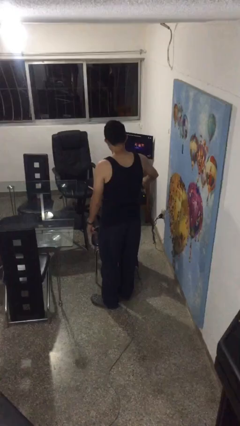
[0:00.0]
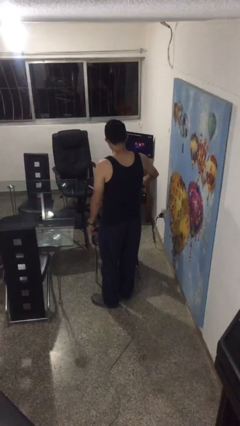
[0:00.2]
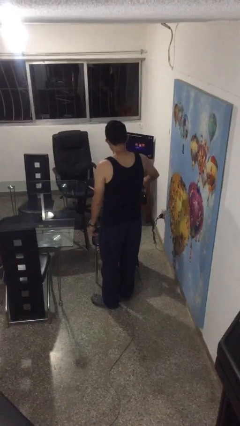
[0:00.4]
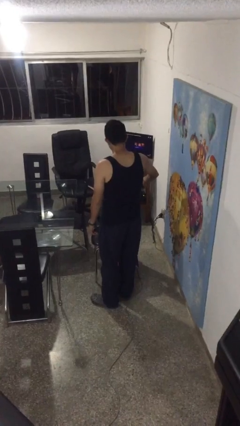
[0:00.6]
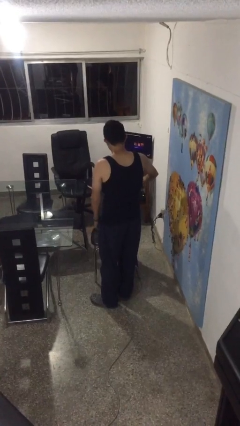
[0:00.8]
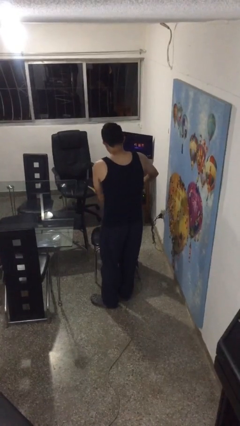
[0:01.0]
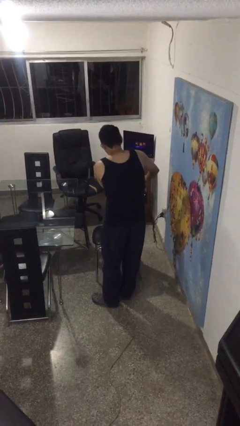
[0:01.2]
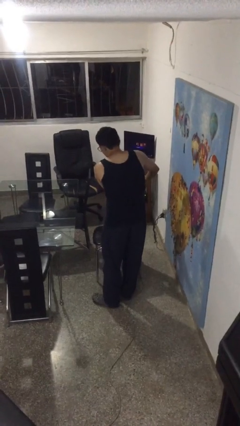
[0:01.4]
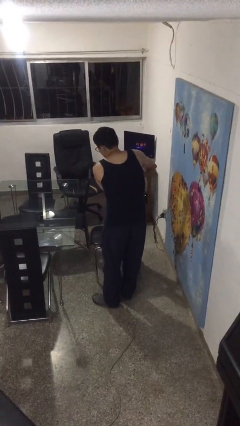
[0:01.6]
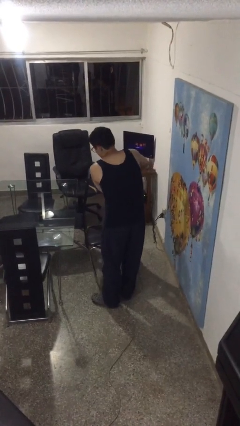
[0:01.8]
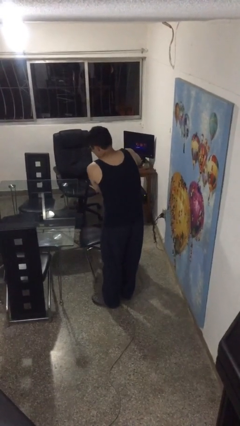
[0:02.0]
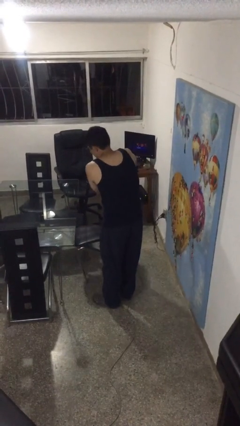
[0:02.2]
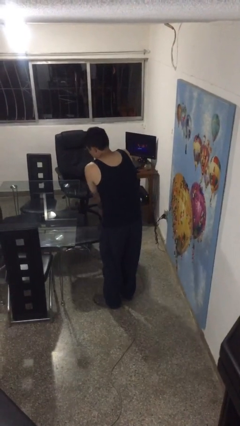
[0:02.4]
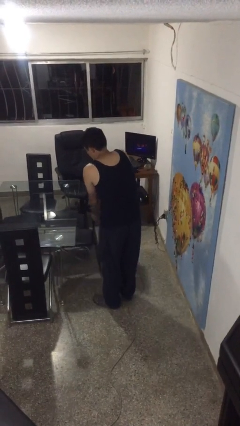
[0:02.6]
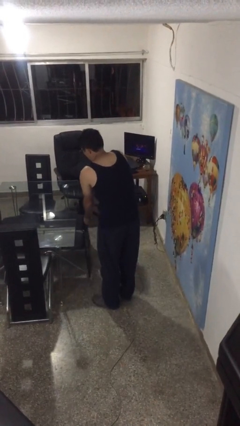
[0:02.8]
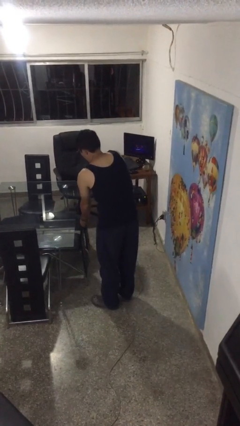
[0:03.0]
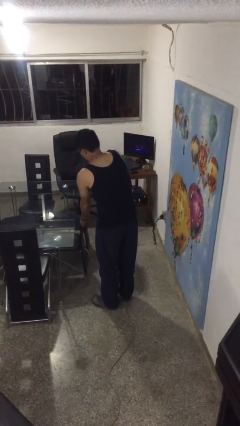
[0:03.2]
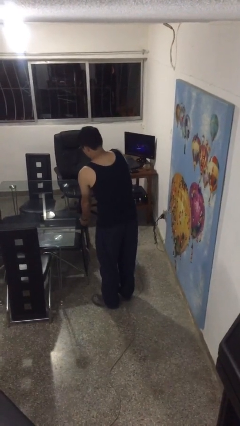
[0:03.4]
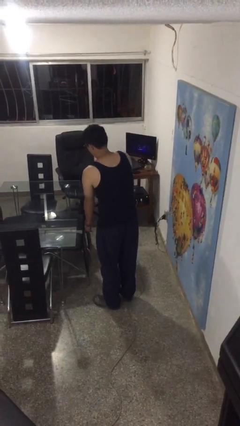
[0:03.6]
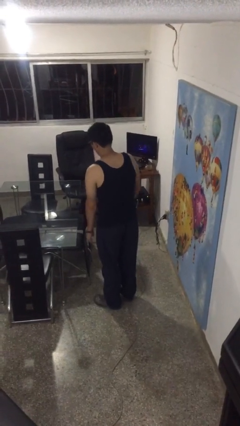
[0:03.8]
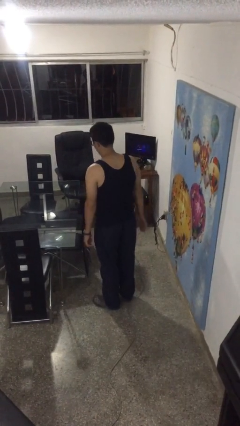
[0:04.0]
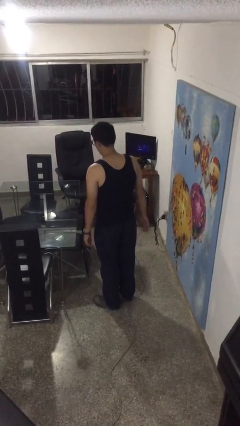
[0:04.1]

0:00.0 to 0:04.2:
person pushes in chair

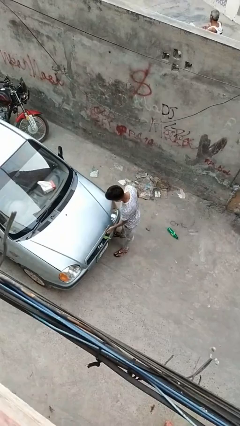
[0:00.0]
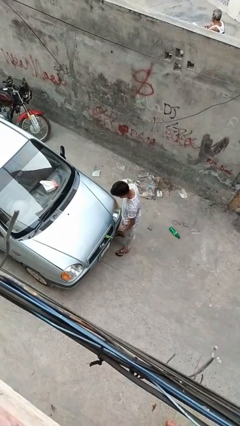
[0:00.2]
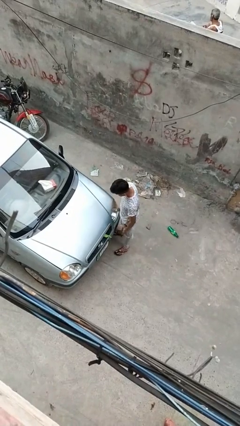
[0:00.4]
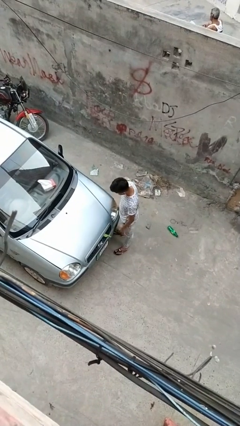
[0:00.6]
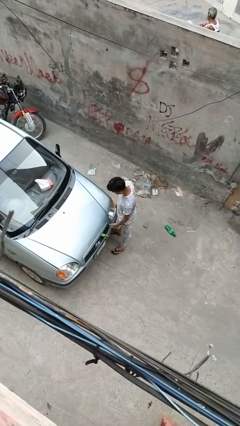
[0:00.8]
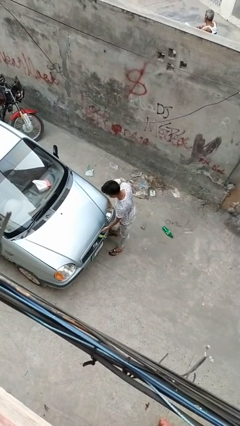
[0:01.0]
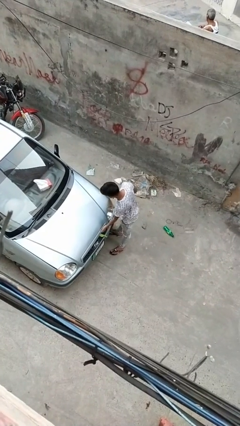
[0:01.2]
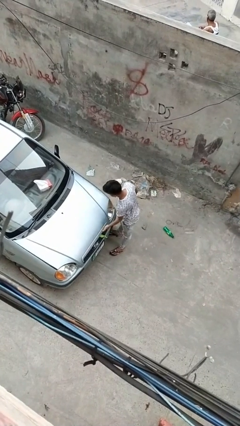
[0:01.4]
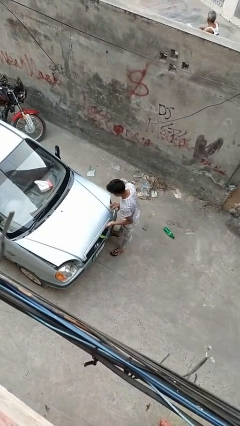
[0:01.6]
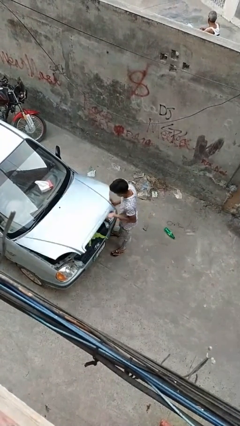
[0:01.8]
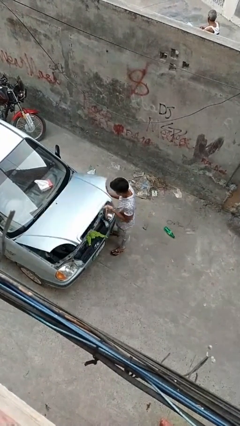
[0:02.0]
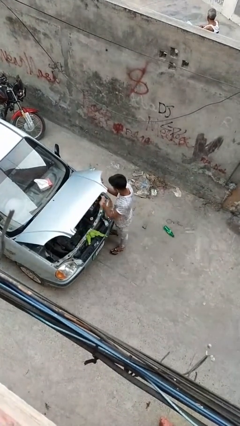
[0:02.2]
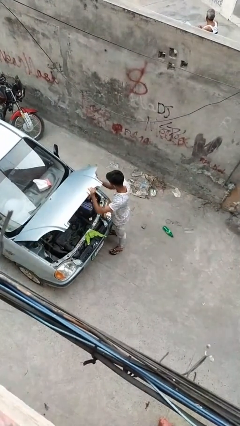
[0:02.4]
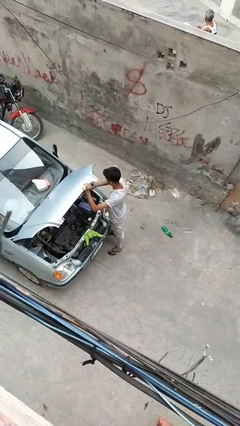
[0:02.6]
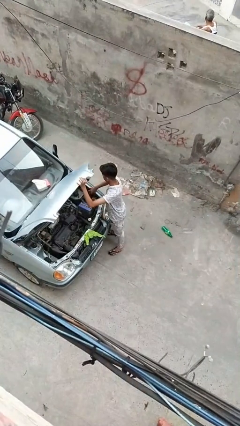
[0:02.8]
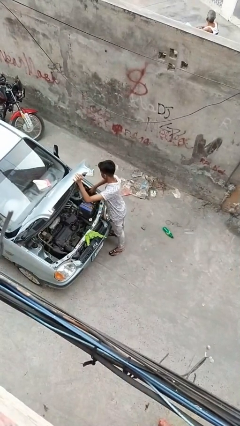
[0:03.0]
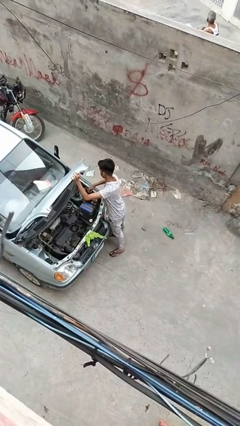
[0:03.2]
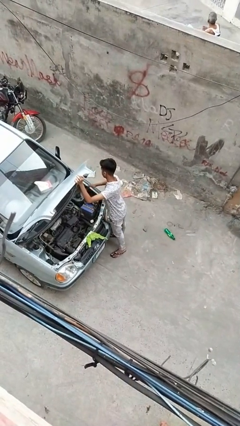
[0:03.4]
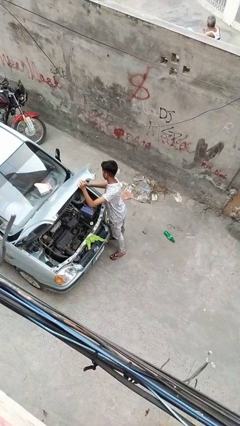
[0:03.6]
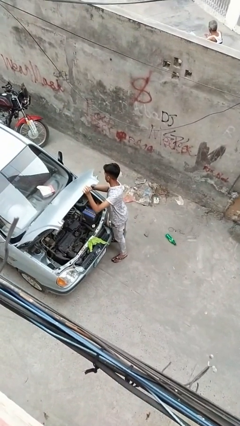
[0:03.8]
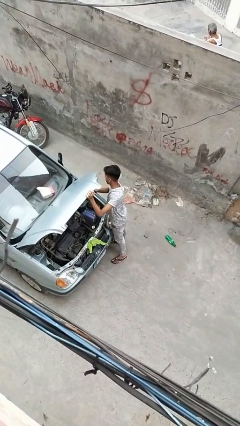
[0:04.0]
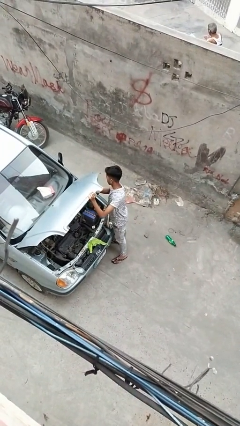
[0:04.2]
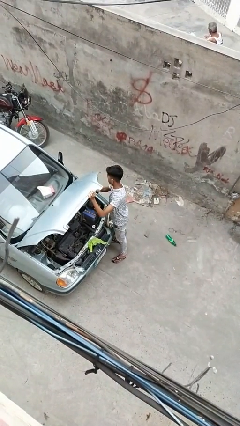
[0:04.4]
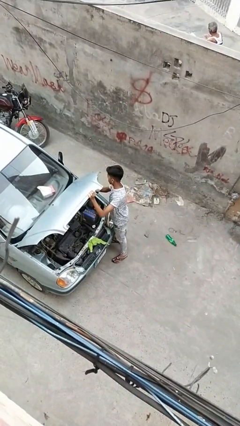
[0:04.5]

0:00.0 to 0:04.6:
person opens car hood

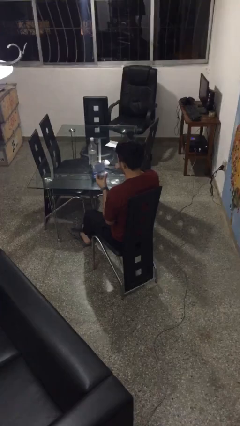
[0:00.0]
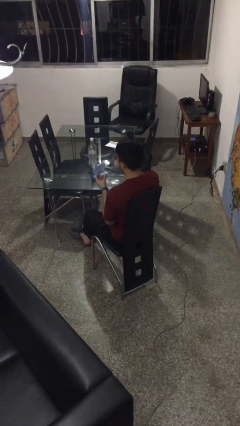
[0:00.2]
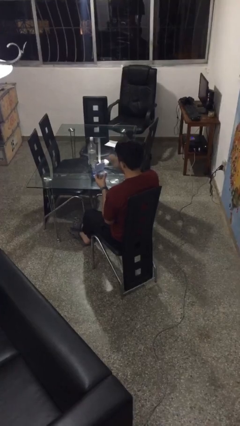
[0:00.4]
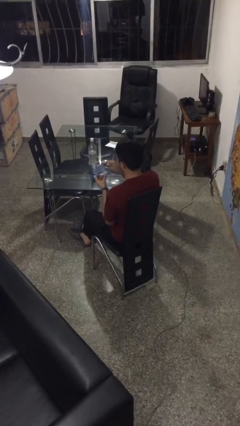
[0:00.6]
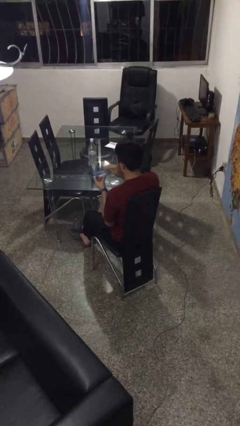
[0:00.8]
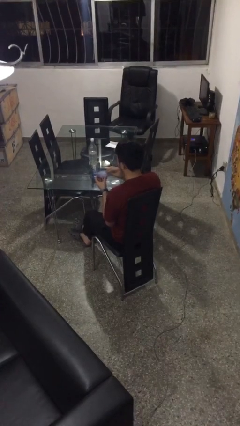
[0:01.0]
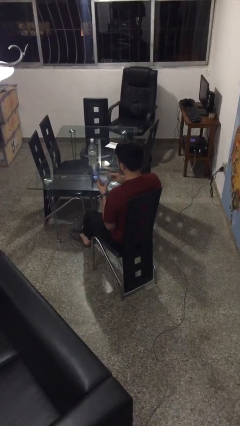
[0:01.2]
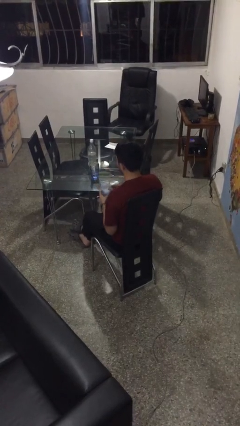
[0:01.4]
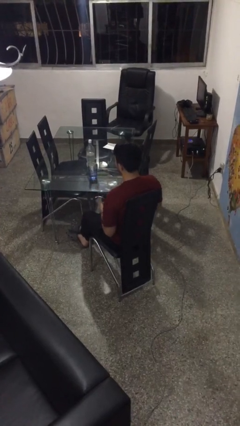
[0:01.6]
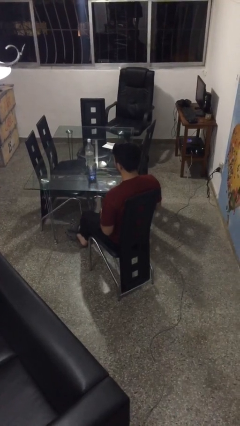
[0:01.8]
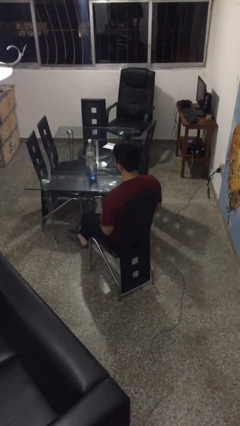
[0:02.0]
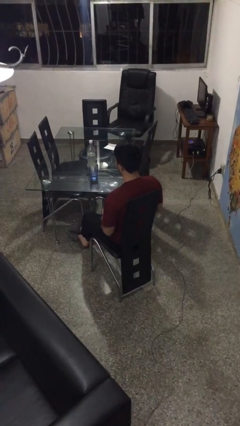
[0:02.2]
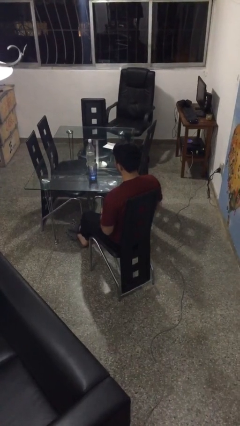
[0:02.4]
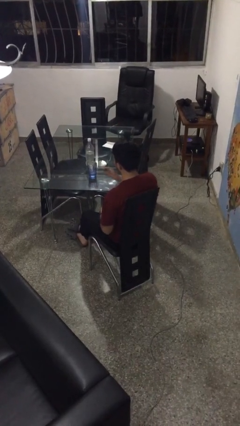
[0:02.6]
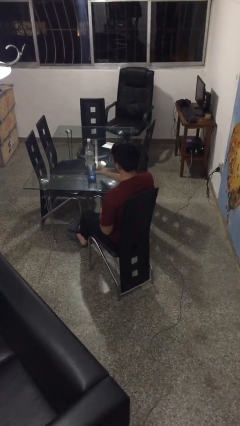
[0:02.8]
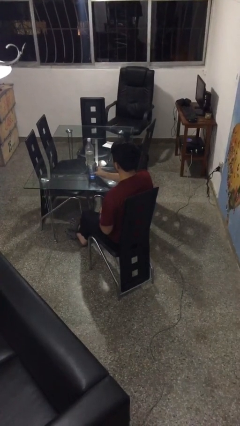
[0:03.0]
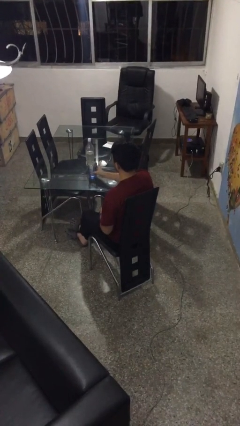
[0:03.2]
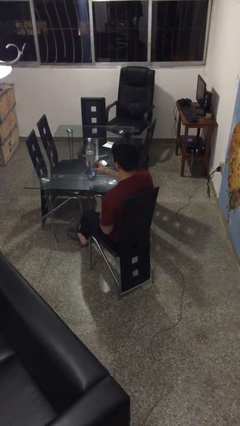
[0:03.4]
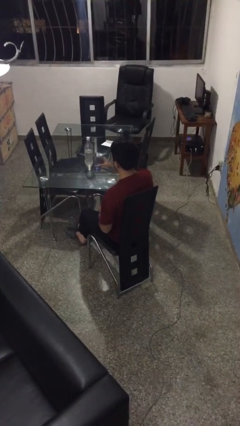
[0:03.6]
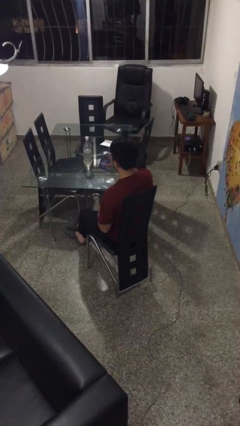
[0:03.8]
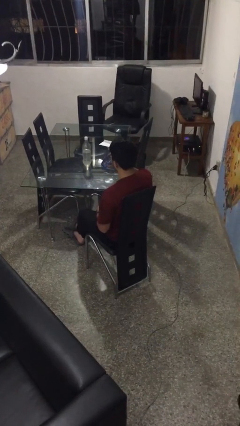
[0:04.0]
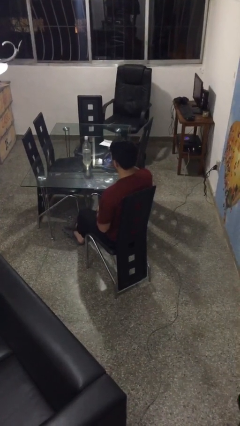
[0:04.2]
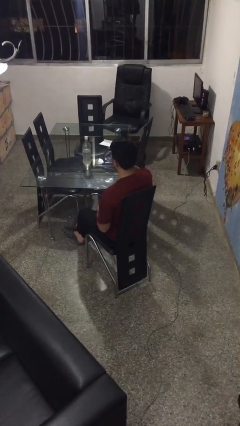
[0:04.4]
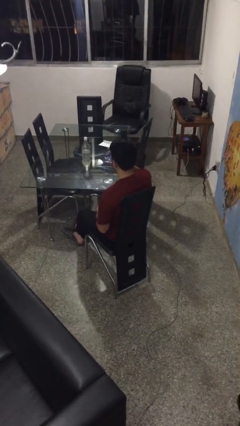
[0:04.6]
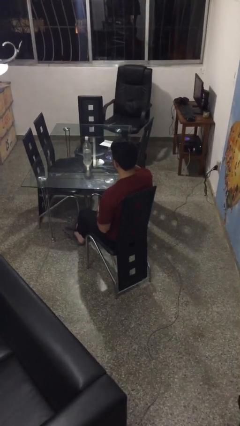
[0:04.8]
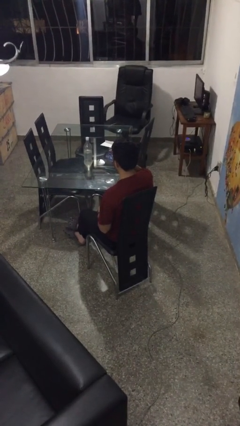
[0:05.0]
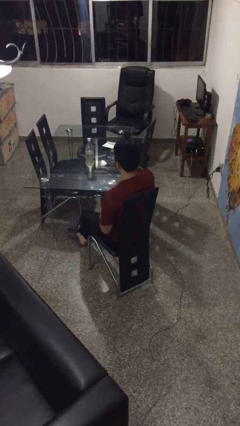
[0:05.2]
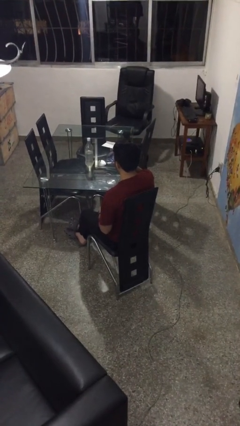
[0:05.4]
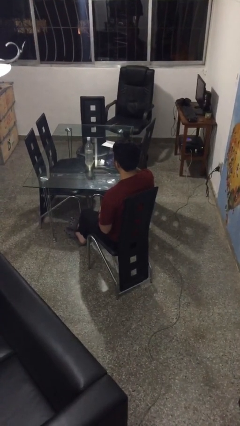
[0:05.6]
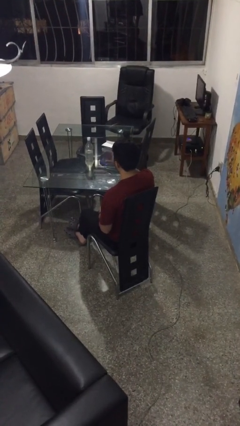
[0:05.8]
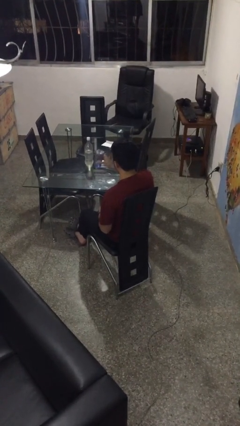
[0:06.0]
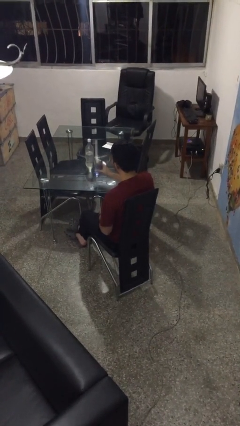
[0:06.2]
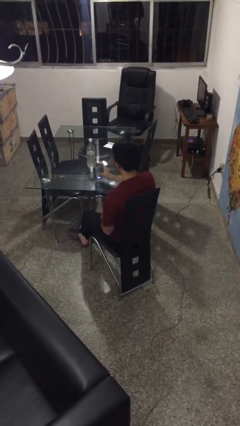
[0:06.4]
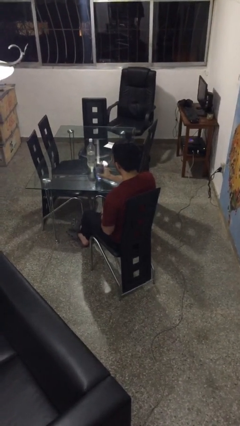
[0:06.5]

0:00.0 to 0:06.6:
person drinks from cup

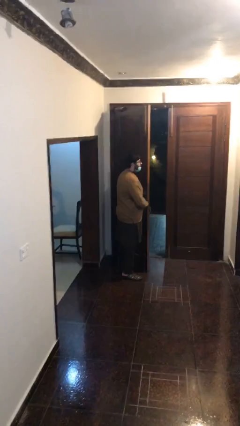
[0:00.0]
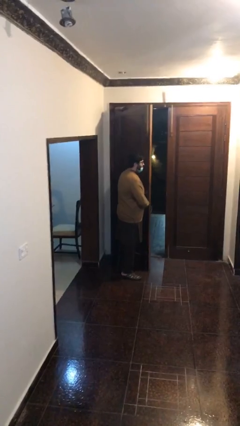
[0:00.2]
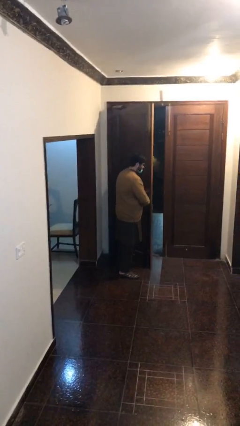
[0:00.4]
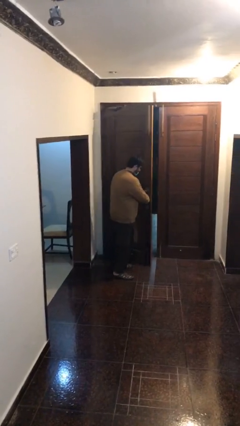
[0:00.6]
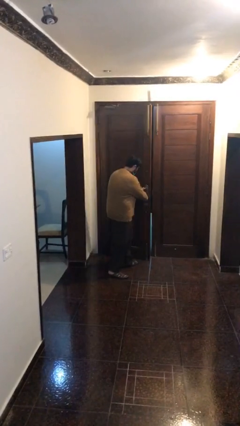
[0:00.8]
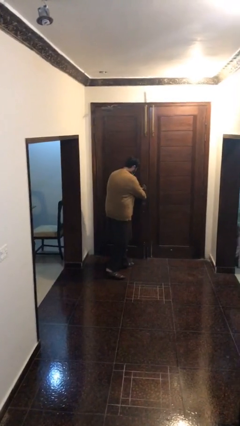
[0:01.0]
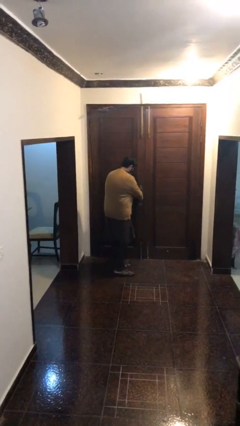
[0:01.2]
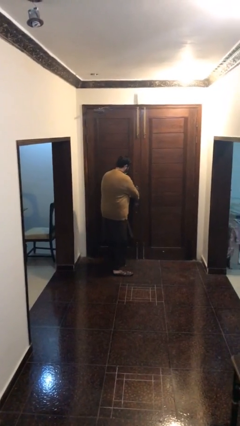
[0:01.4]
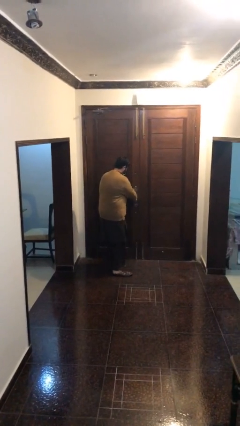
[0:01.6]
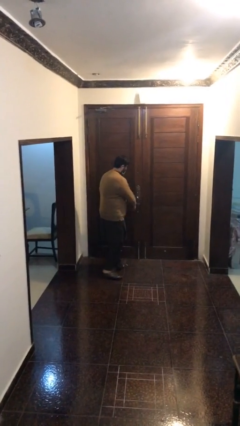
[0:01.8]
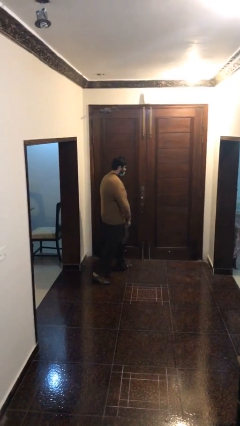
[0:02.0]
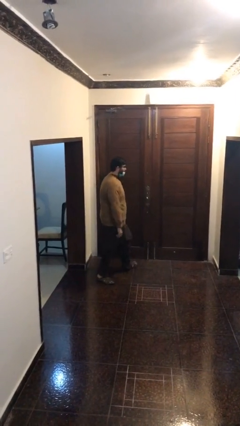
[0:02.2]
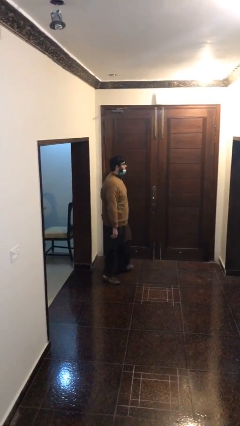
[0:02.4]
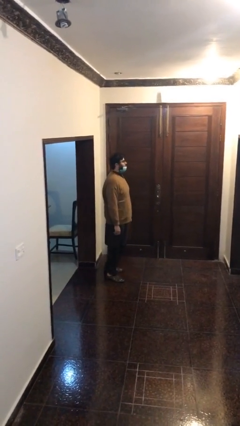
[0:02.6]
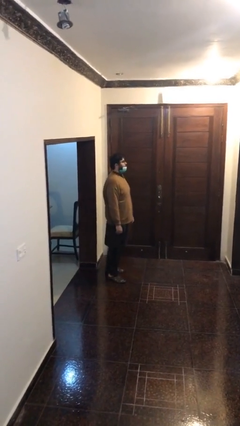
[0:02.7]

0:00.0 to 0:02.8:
person closes facility door
